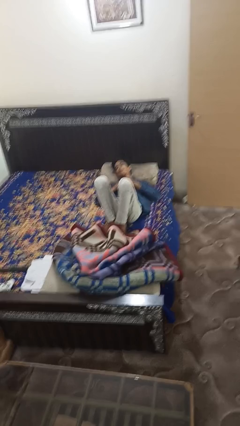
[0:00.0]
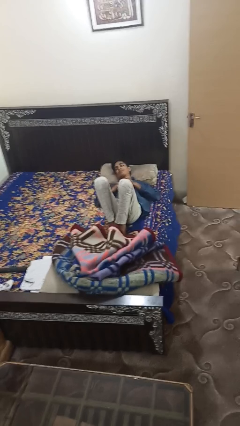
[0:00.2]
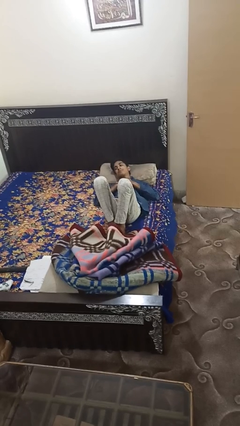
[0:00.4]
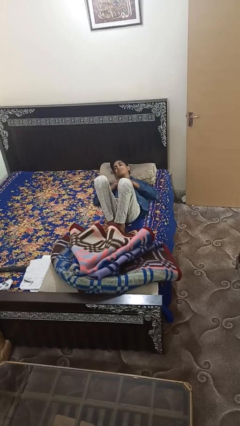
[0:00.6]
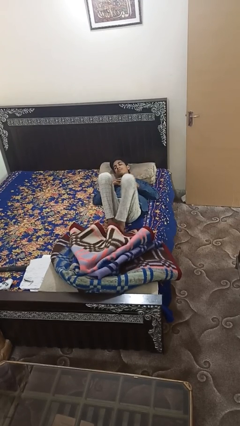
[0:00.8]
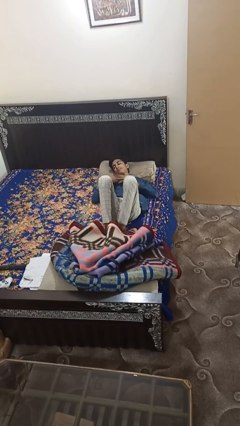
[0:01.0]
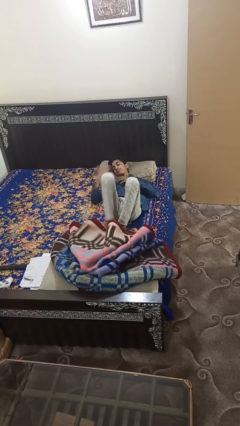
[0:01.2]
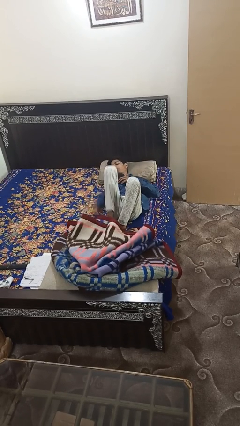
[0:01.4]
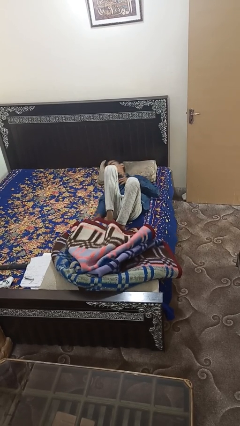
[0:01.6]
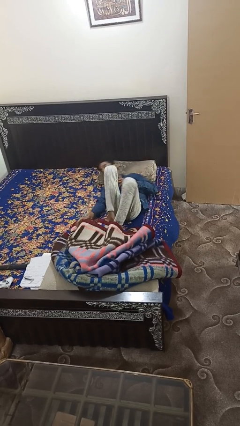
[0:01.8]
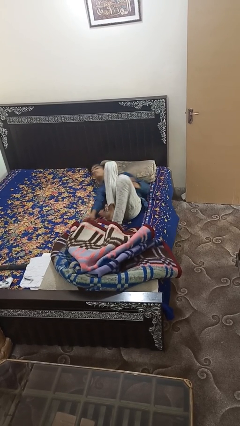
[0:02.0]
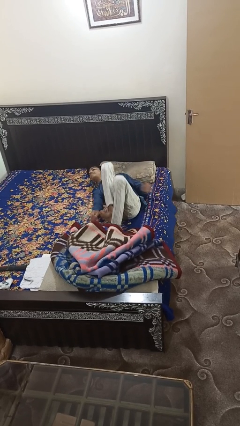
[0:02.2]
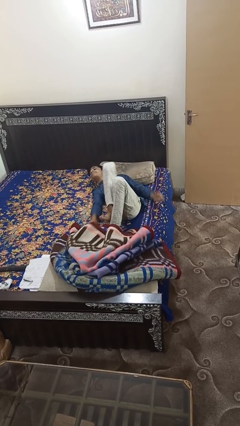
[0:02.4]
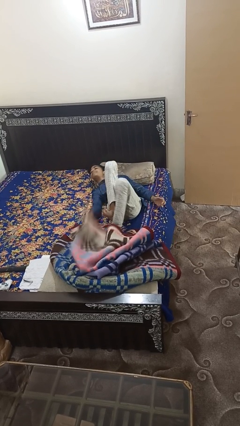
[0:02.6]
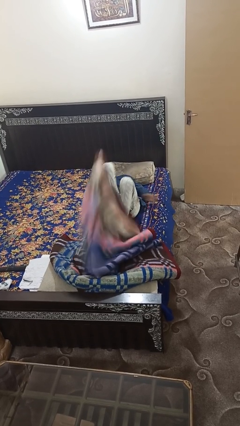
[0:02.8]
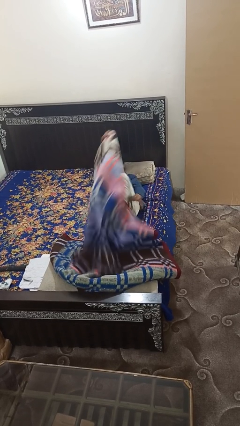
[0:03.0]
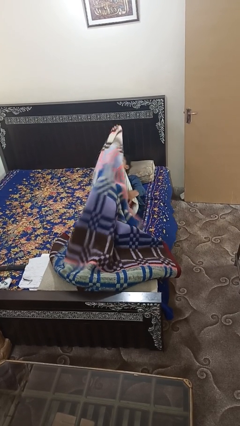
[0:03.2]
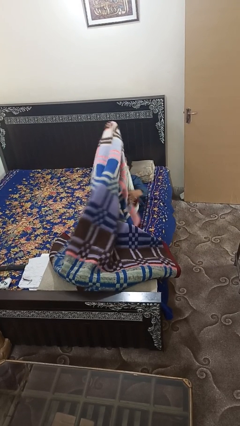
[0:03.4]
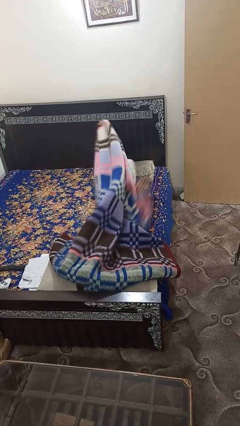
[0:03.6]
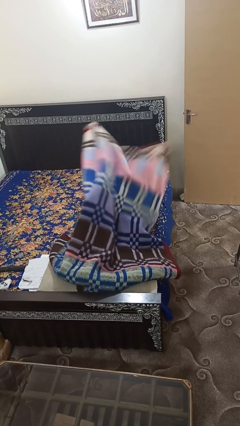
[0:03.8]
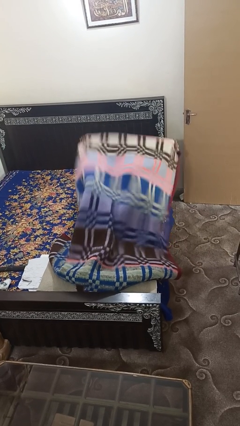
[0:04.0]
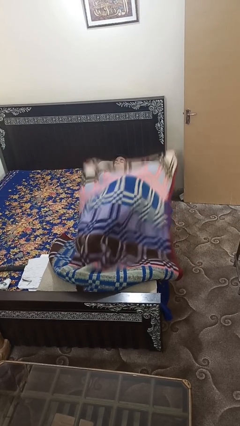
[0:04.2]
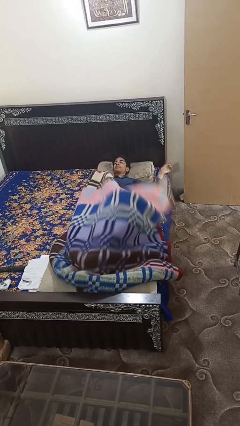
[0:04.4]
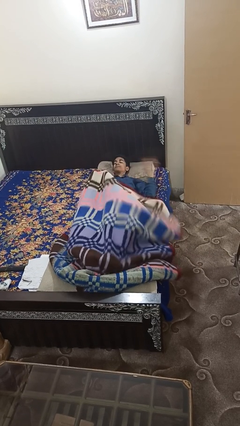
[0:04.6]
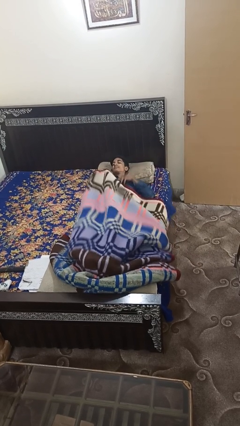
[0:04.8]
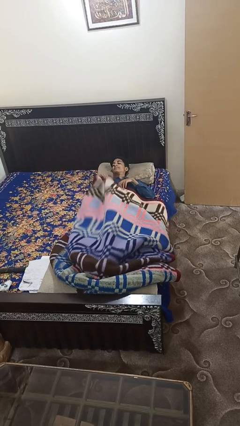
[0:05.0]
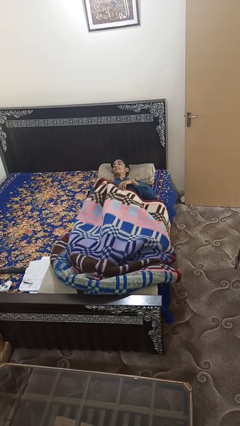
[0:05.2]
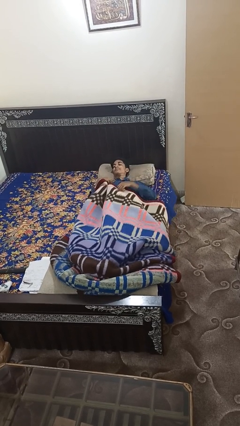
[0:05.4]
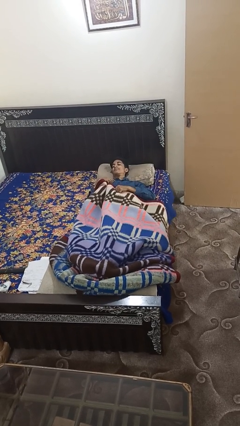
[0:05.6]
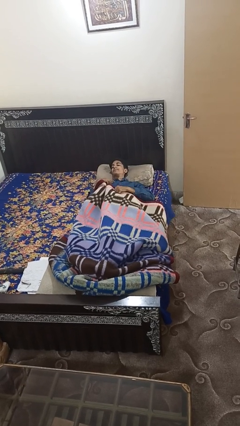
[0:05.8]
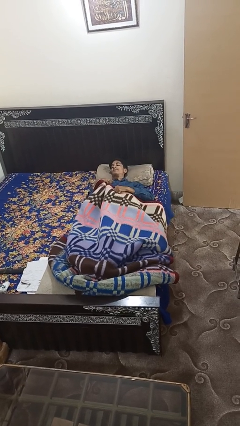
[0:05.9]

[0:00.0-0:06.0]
person covers with bedsheets

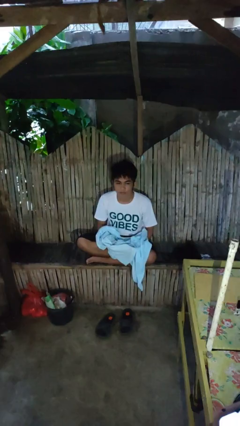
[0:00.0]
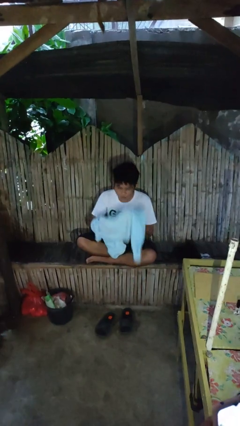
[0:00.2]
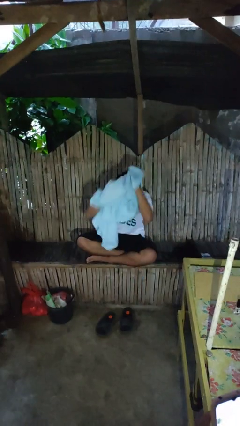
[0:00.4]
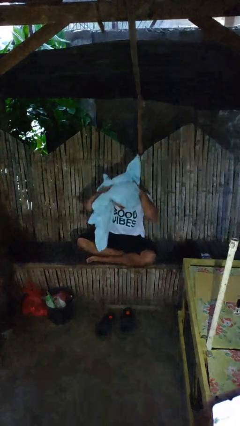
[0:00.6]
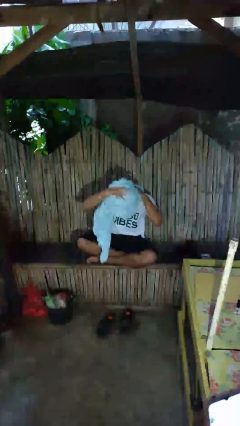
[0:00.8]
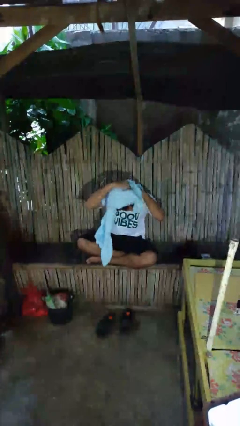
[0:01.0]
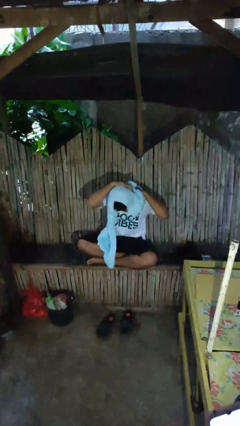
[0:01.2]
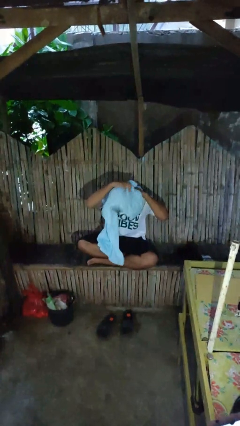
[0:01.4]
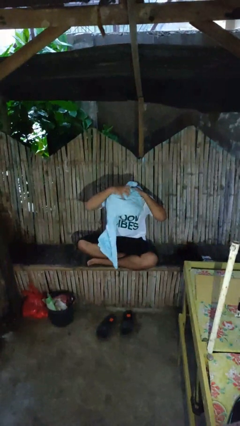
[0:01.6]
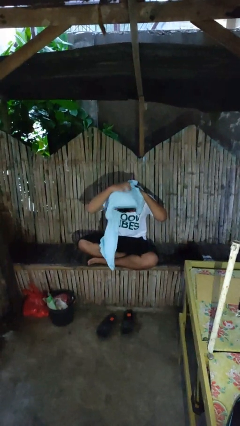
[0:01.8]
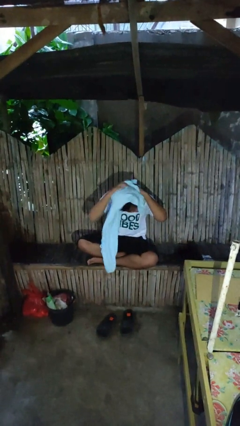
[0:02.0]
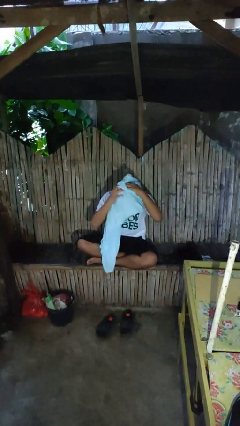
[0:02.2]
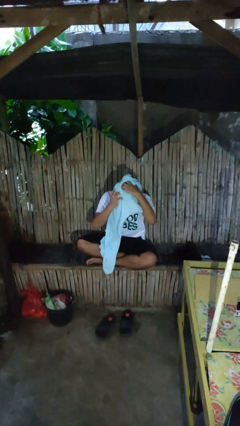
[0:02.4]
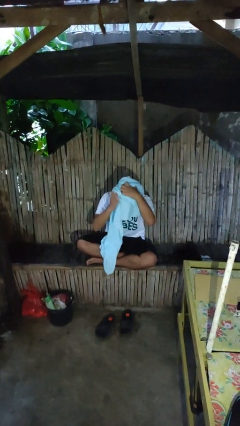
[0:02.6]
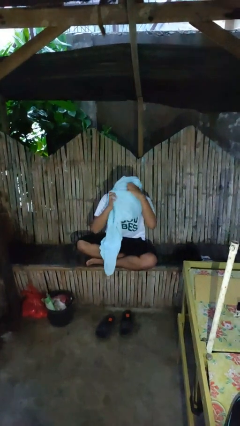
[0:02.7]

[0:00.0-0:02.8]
person dries hair with hairdryer

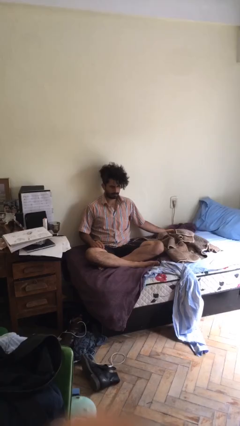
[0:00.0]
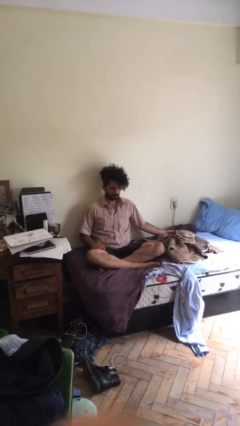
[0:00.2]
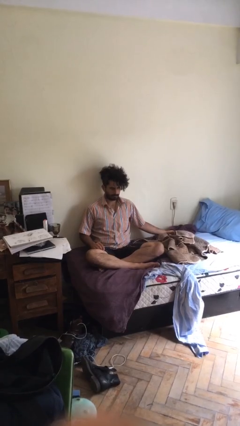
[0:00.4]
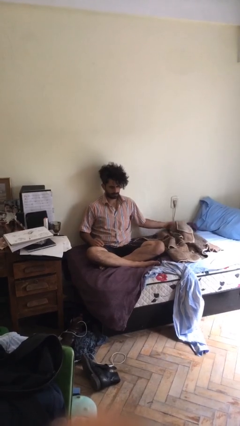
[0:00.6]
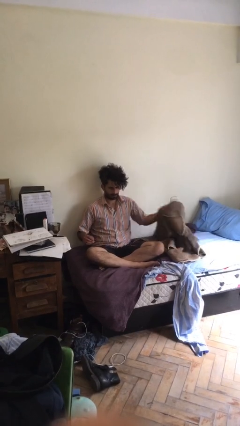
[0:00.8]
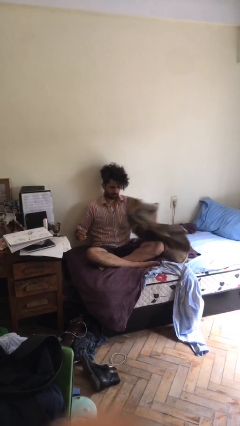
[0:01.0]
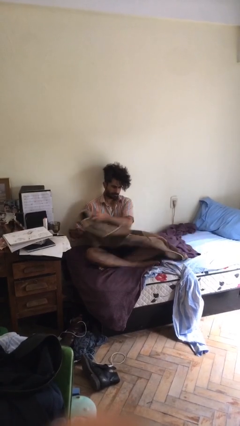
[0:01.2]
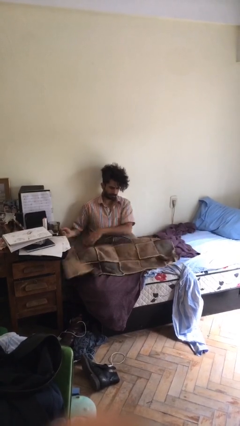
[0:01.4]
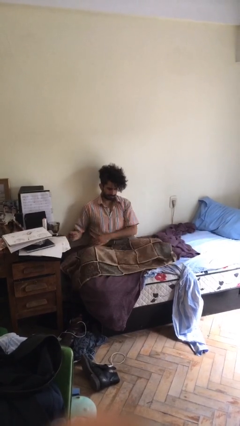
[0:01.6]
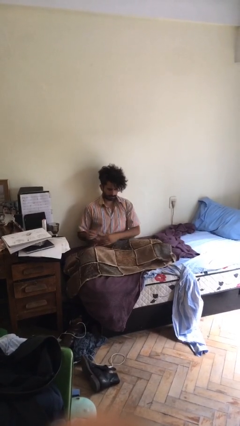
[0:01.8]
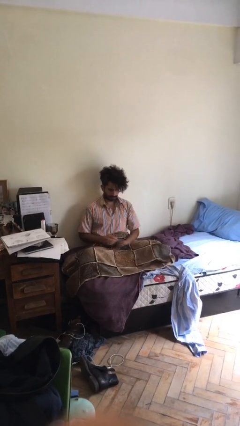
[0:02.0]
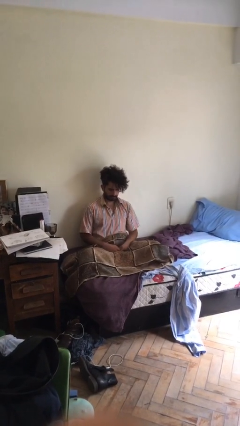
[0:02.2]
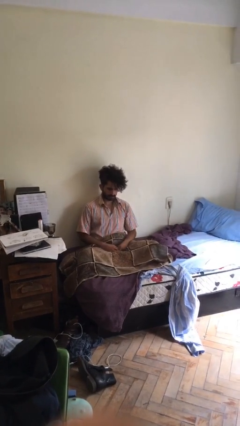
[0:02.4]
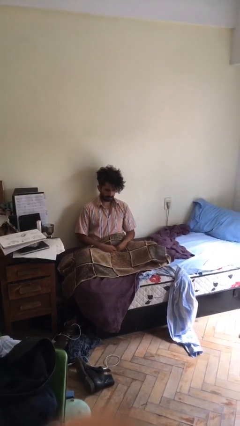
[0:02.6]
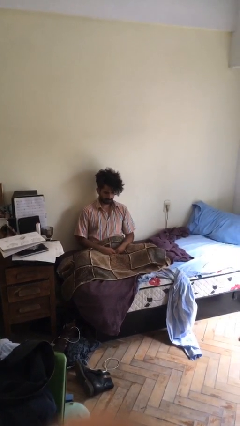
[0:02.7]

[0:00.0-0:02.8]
person covers with blanket

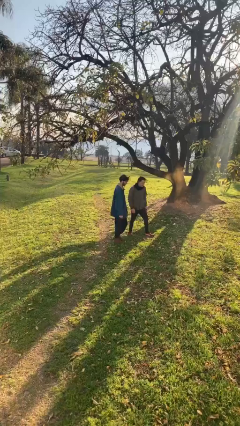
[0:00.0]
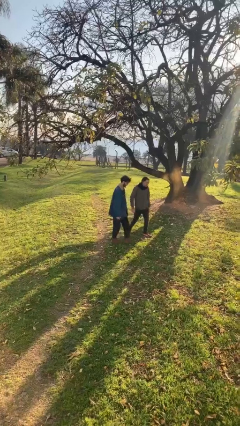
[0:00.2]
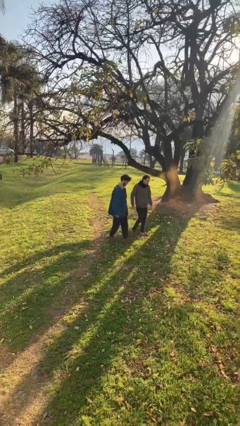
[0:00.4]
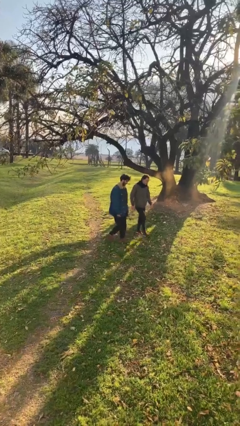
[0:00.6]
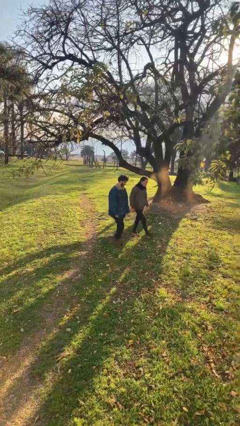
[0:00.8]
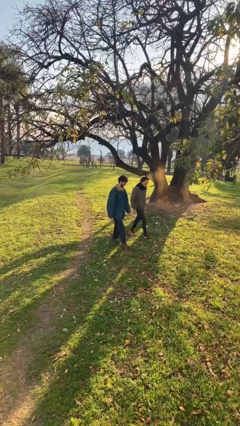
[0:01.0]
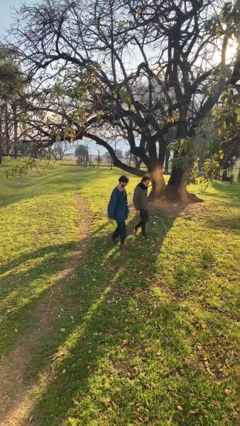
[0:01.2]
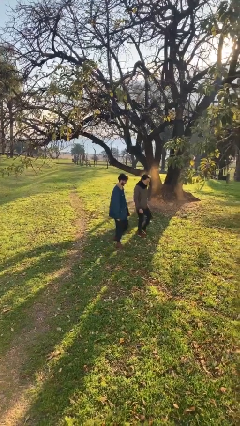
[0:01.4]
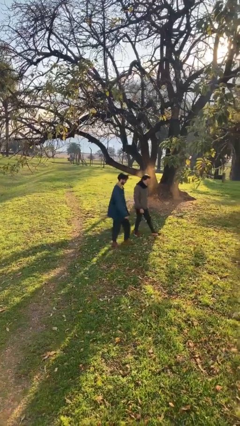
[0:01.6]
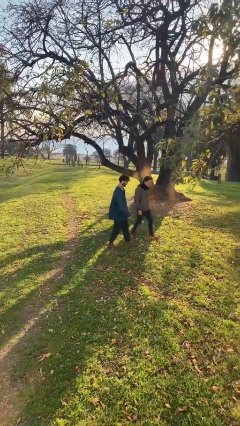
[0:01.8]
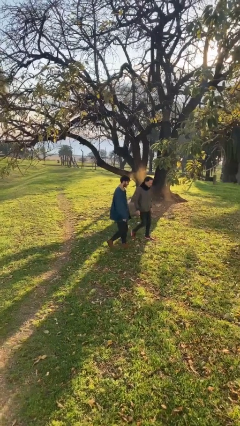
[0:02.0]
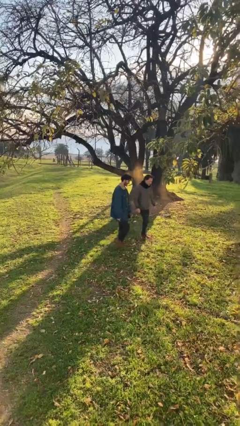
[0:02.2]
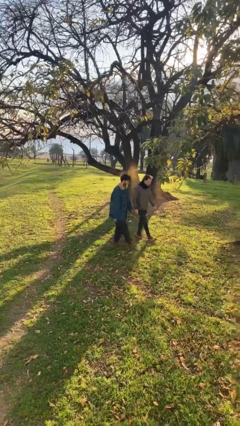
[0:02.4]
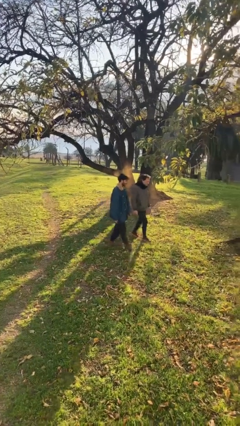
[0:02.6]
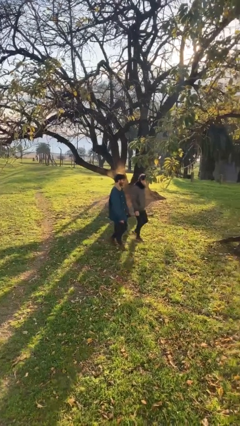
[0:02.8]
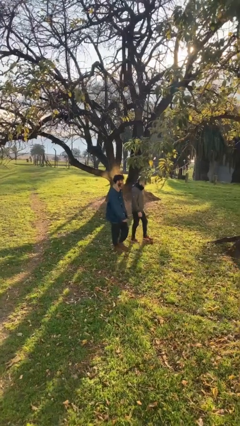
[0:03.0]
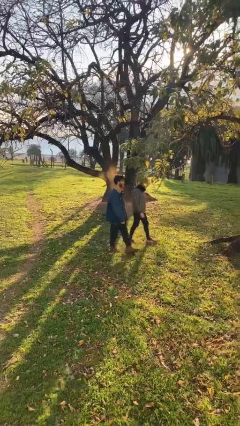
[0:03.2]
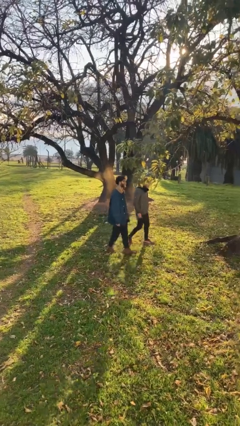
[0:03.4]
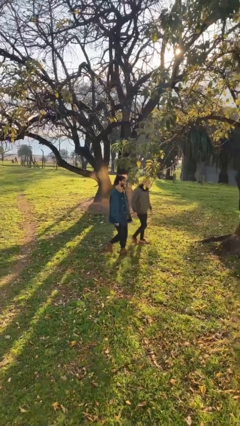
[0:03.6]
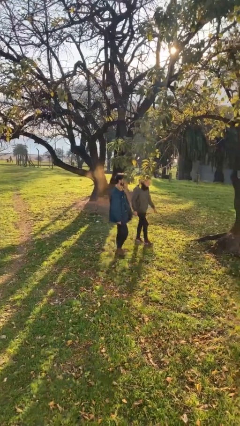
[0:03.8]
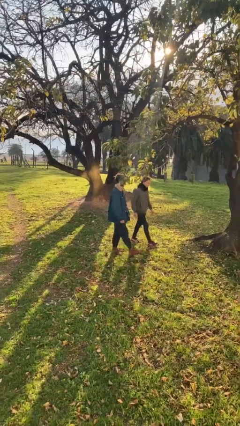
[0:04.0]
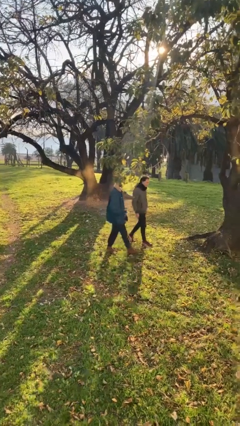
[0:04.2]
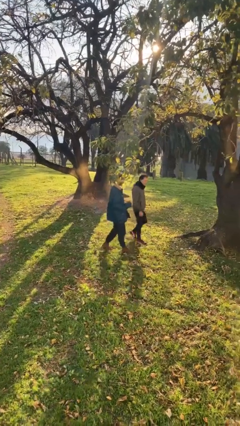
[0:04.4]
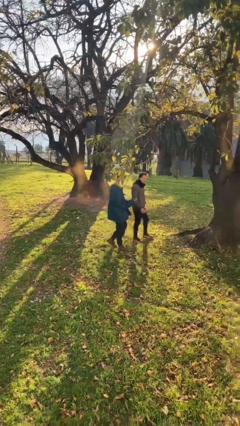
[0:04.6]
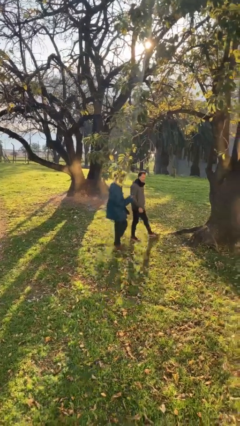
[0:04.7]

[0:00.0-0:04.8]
person talks to person

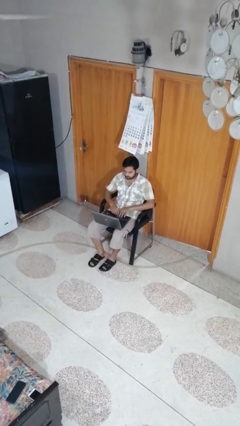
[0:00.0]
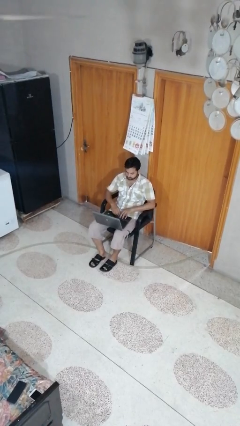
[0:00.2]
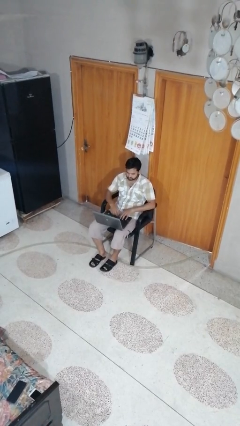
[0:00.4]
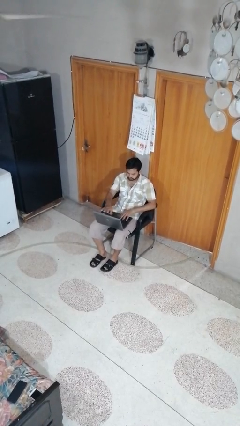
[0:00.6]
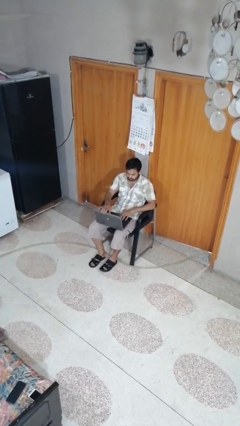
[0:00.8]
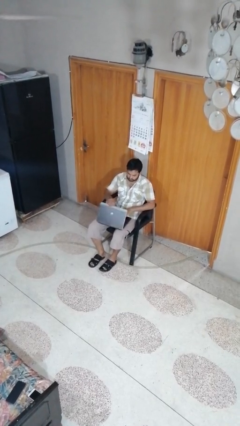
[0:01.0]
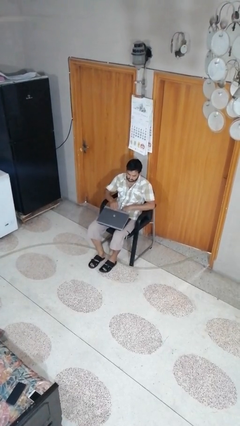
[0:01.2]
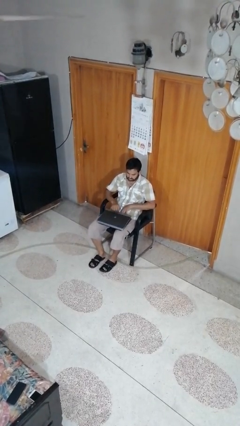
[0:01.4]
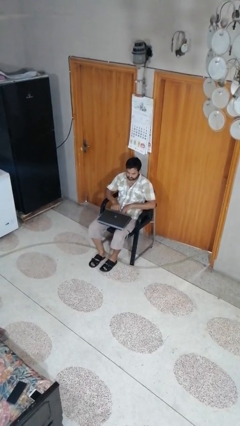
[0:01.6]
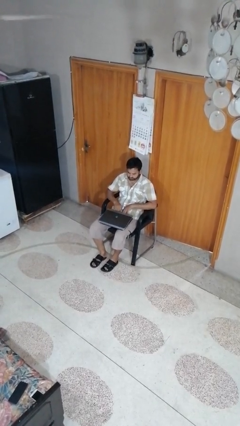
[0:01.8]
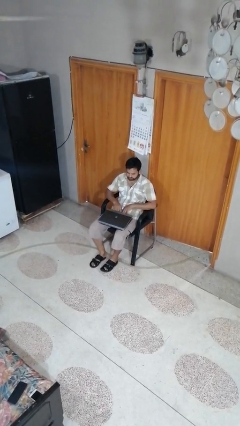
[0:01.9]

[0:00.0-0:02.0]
person closes laptop
